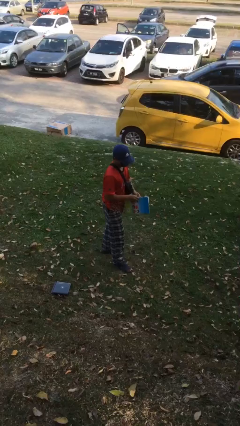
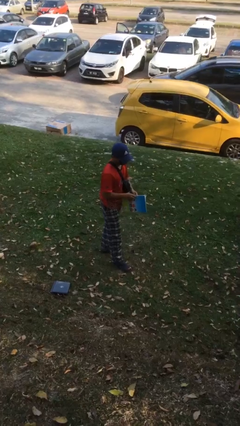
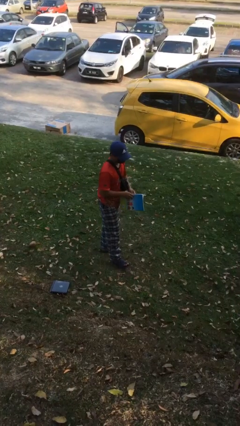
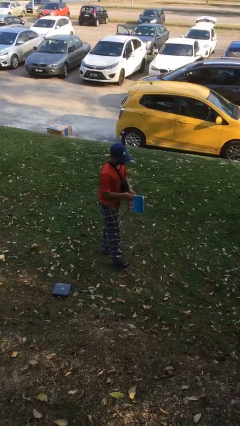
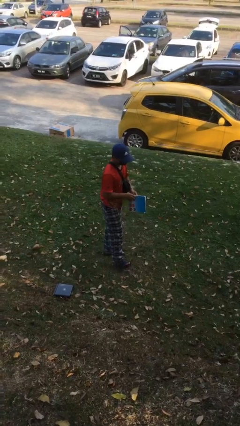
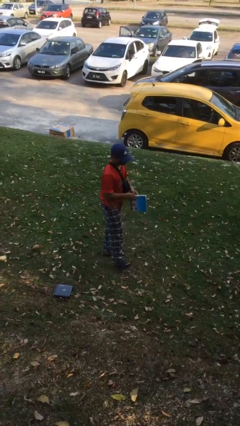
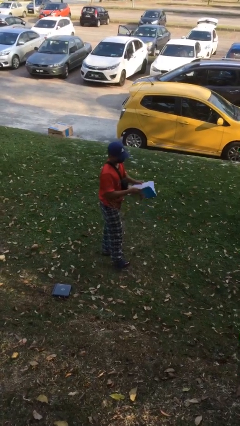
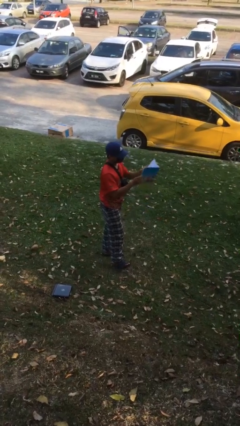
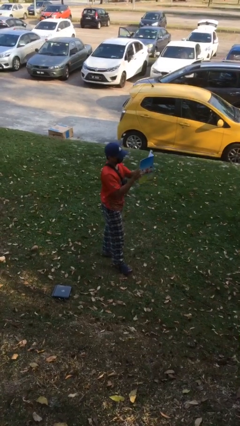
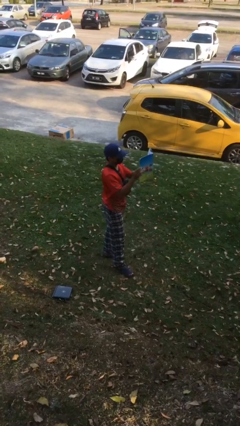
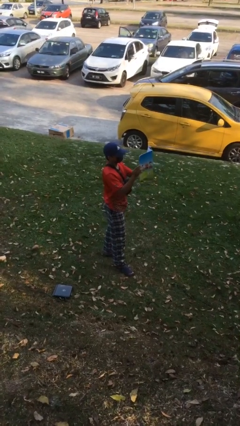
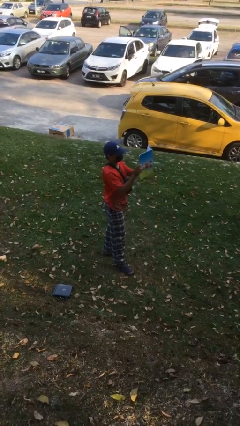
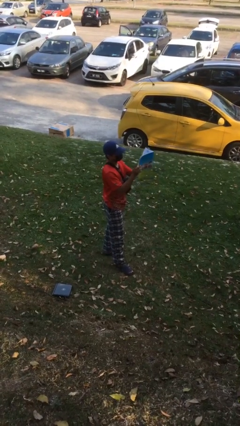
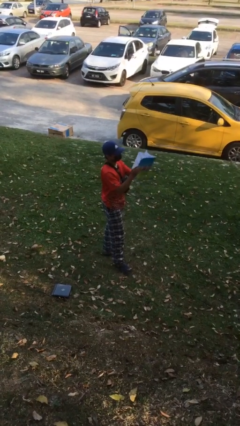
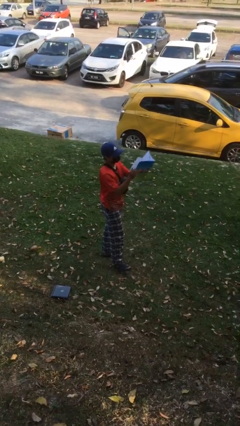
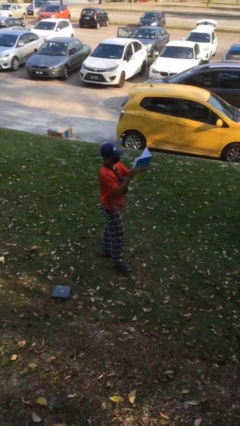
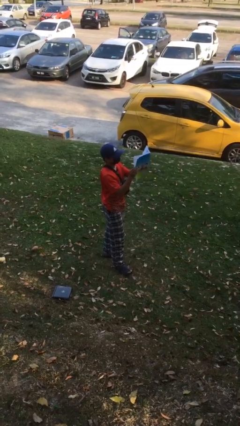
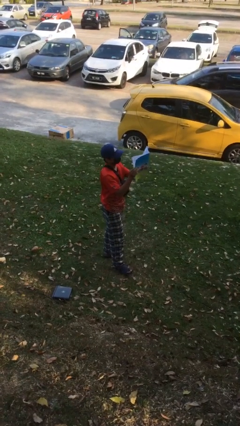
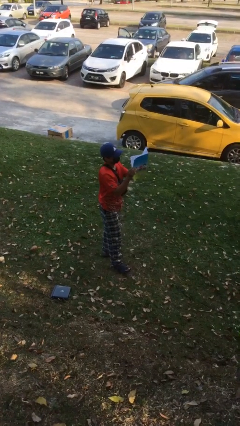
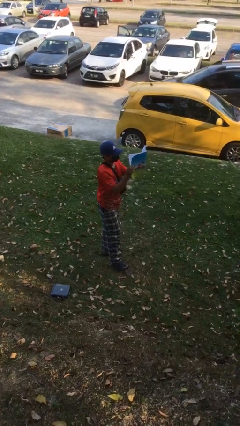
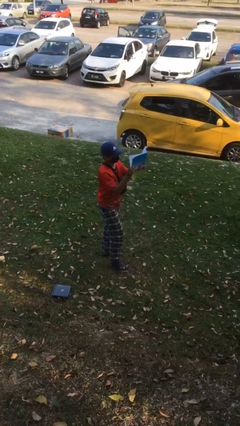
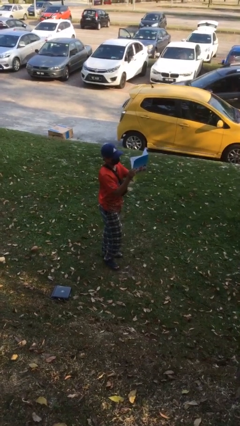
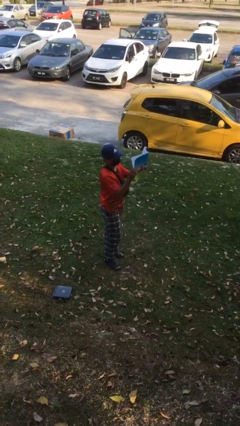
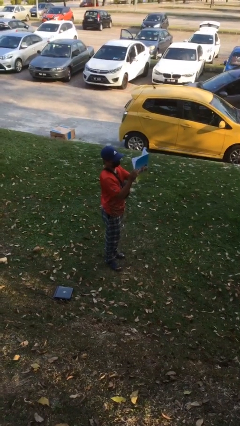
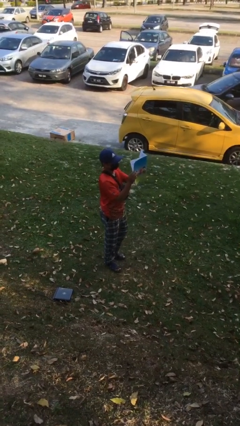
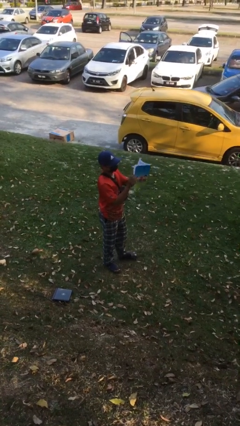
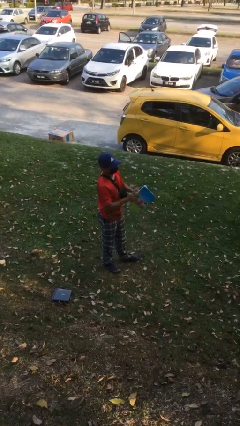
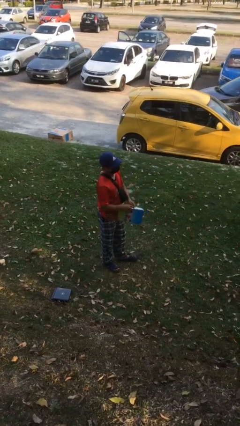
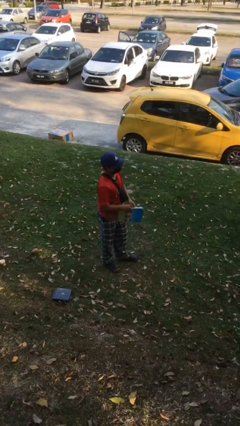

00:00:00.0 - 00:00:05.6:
person reads document

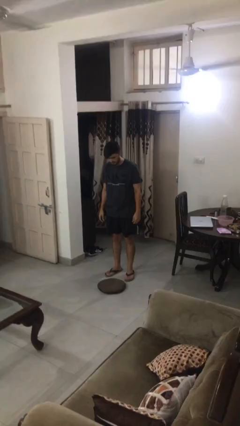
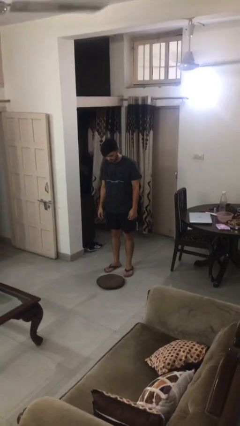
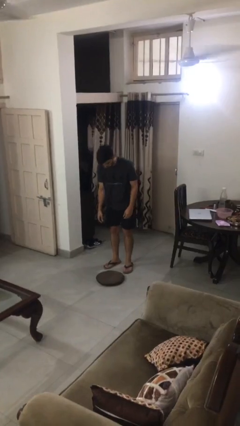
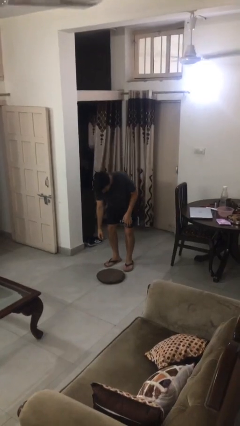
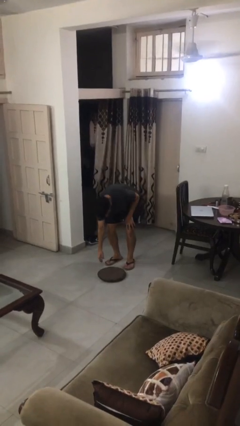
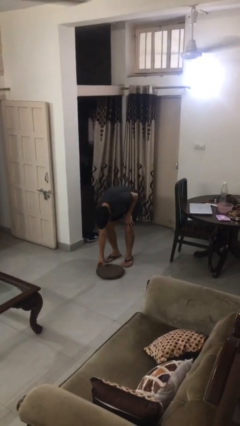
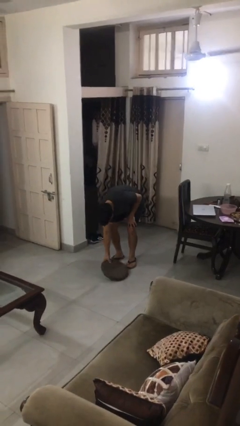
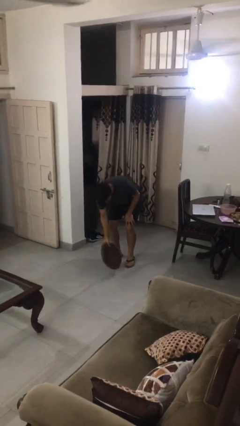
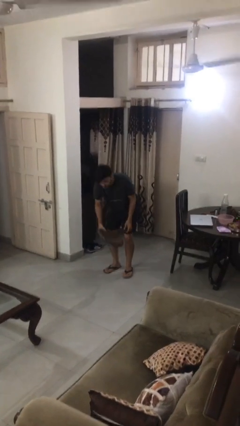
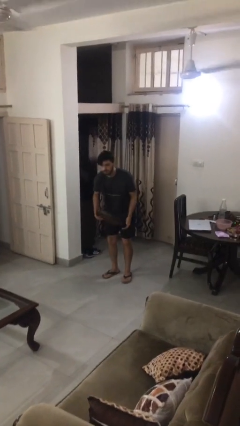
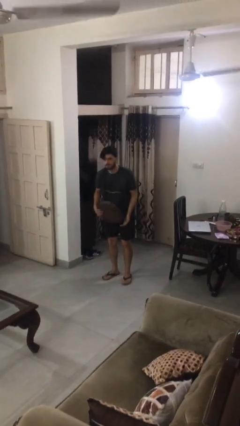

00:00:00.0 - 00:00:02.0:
person picks up object from floor

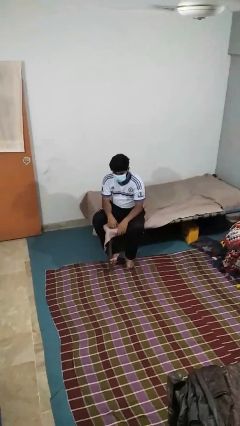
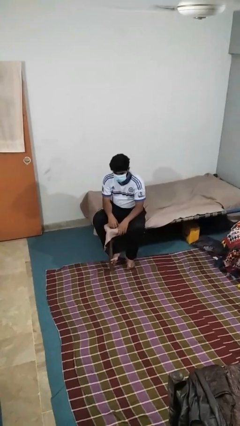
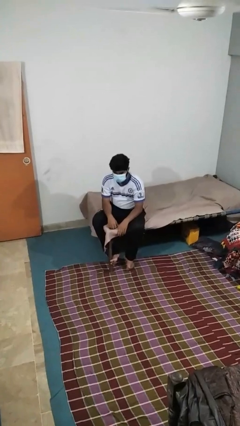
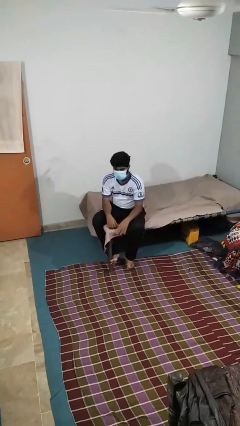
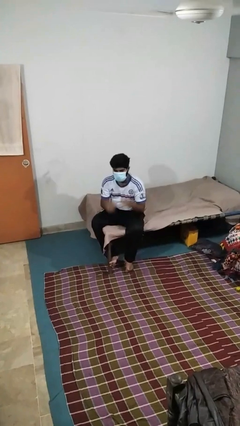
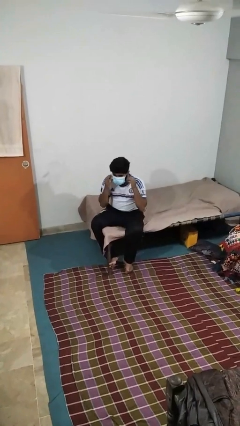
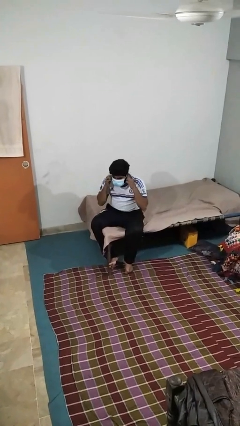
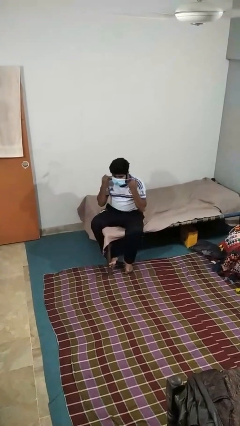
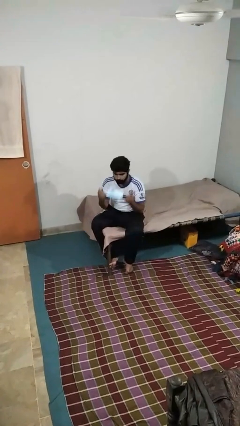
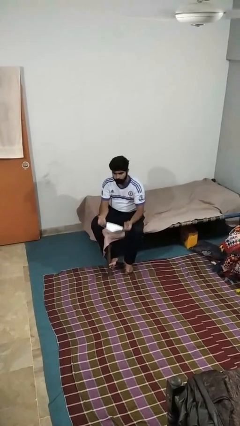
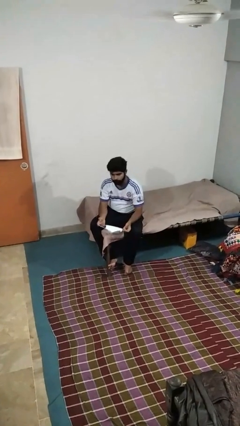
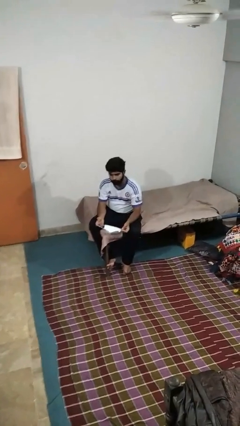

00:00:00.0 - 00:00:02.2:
person takes off facemask

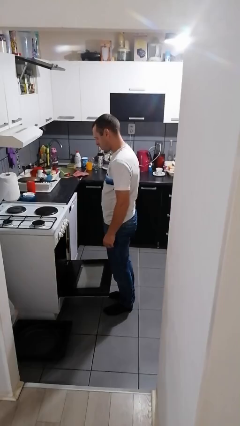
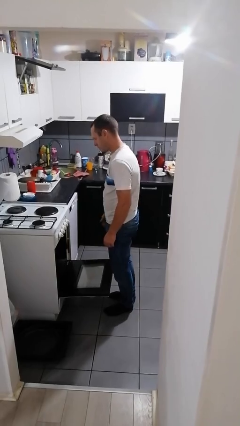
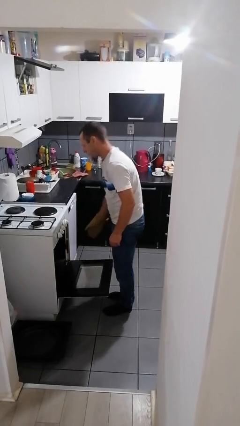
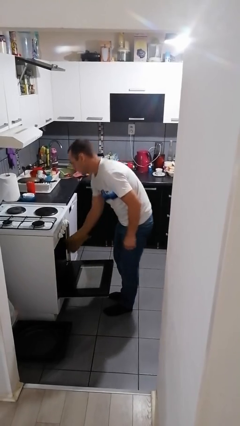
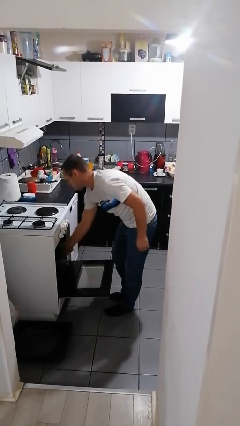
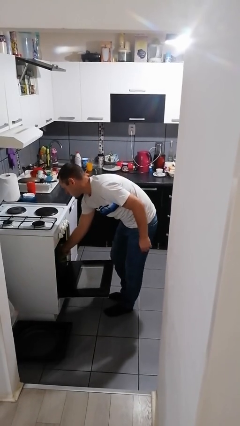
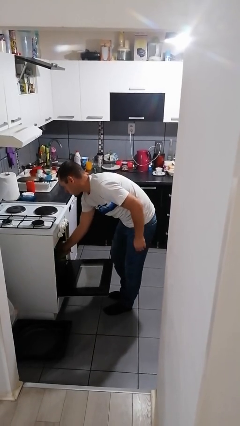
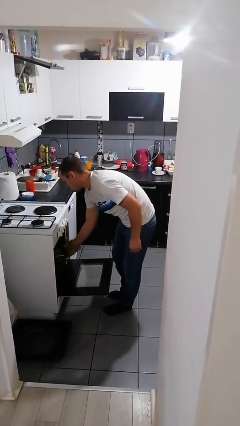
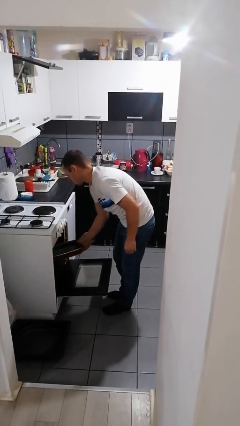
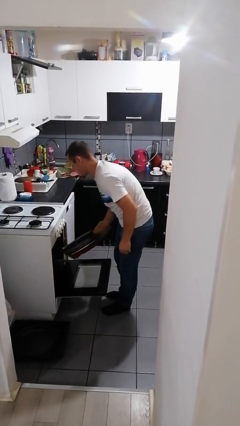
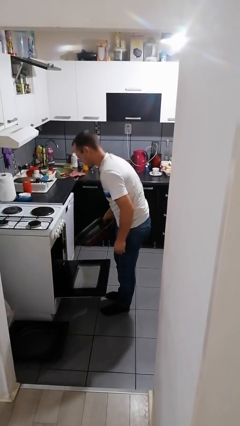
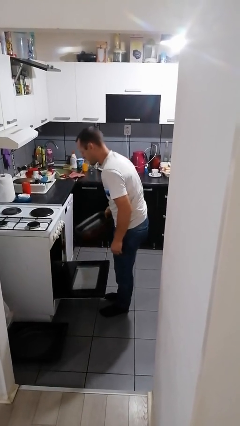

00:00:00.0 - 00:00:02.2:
person takes object from oven

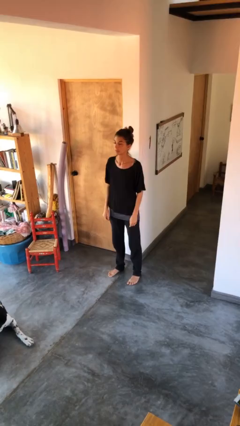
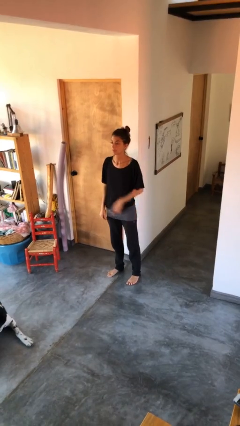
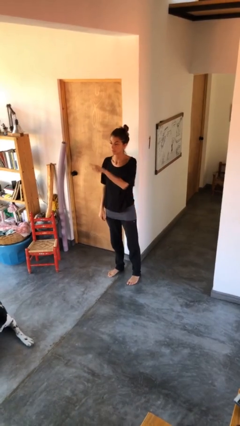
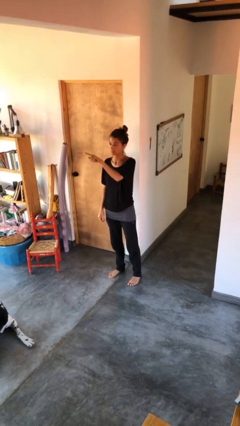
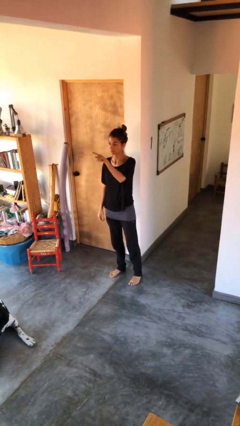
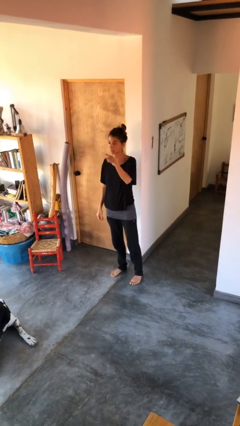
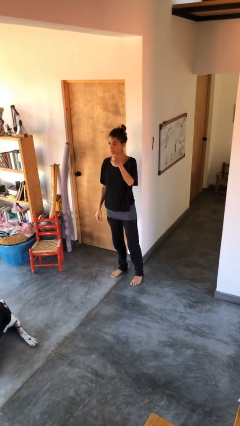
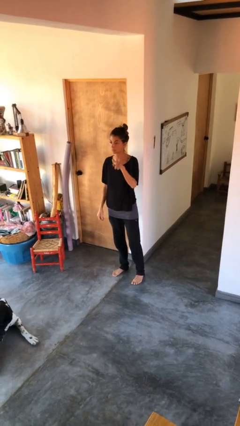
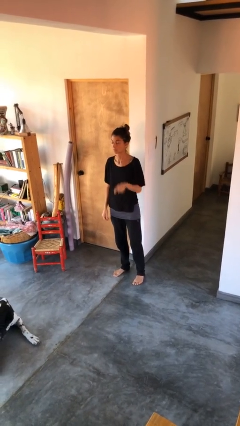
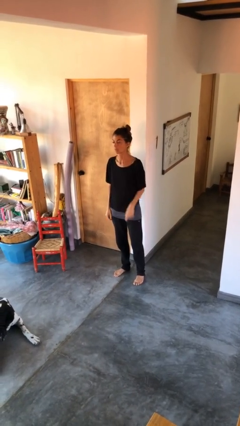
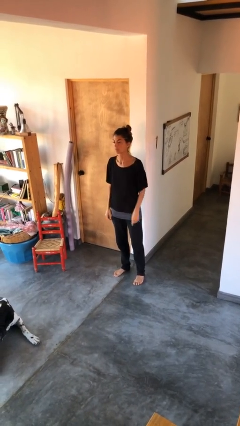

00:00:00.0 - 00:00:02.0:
person gestures swipe left

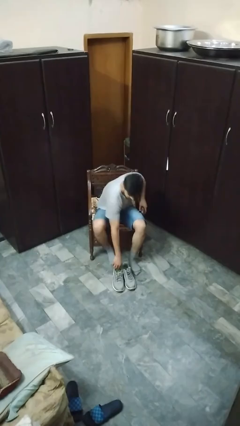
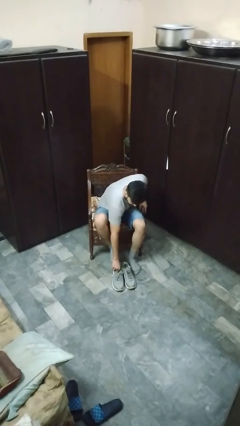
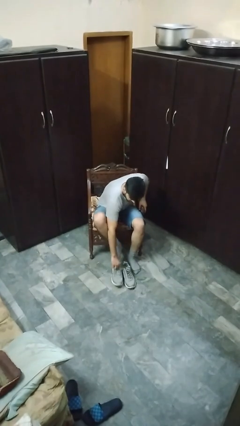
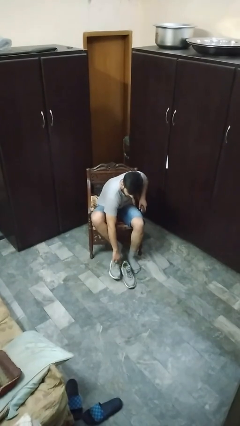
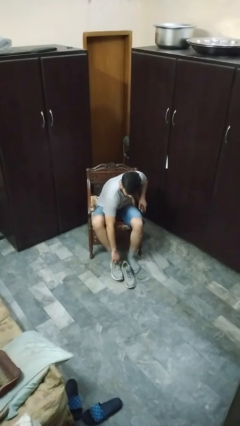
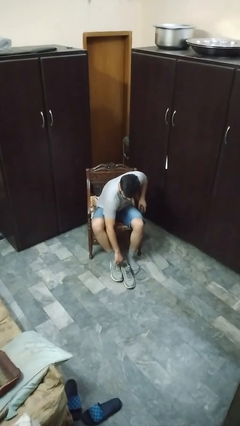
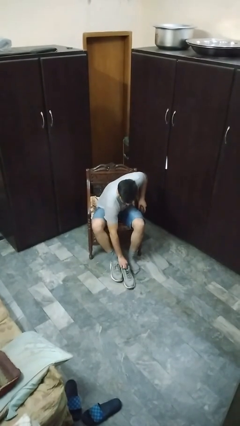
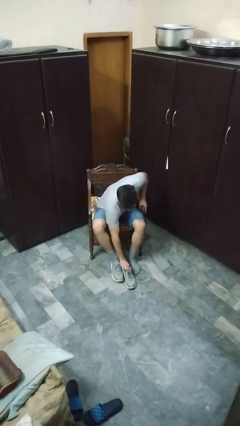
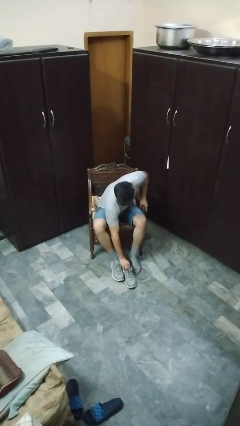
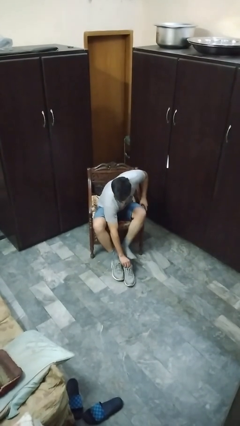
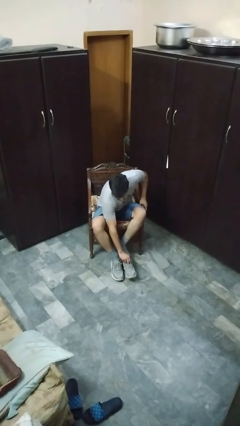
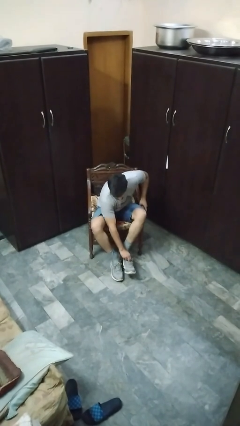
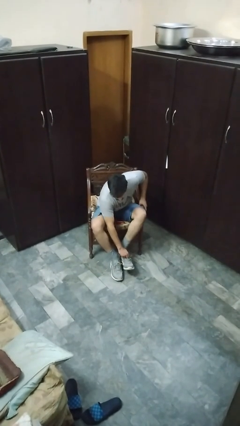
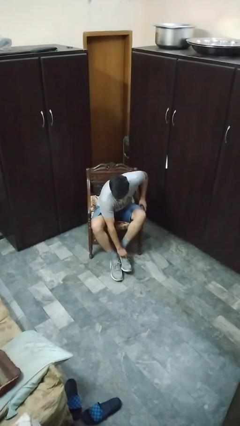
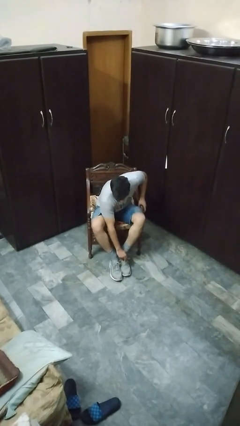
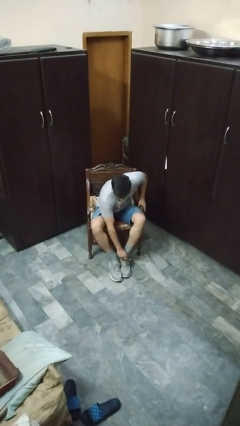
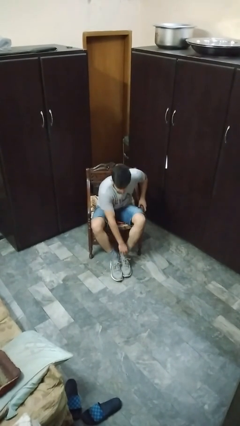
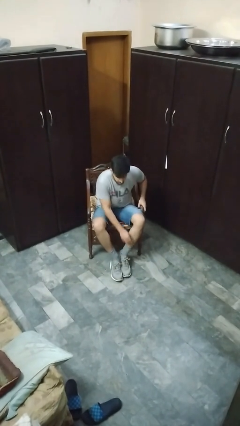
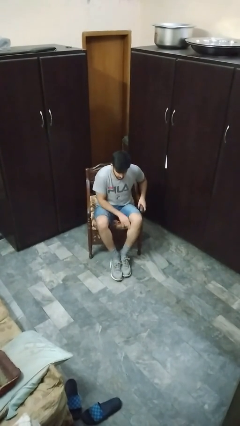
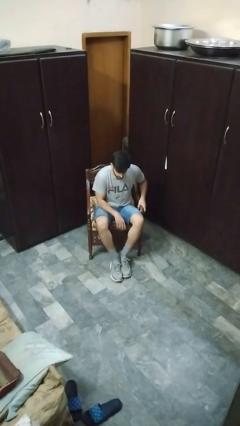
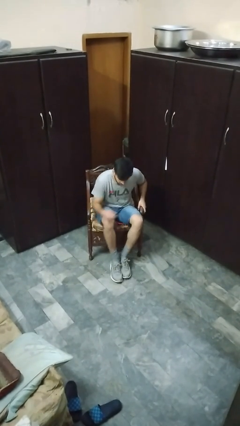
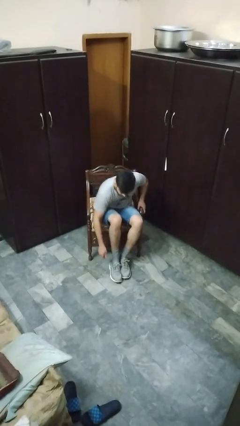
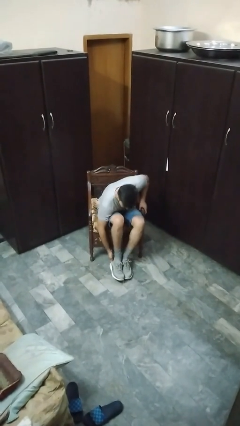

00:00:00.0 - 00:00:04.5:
person puts on shoes
